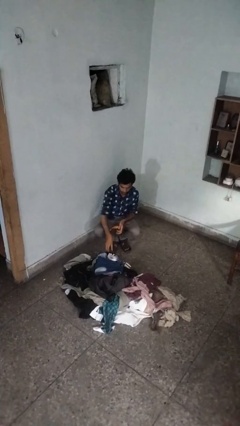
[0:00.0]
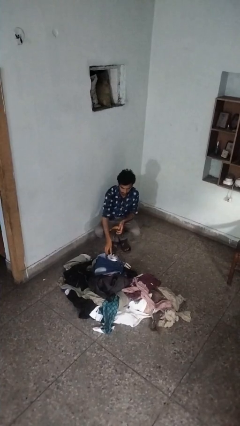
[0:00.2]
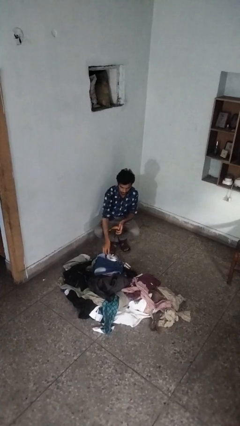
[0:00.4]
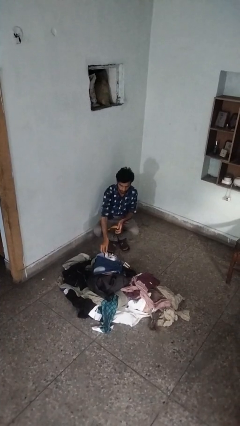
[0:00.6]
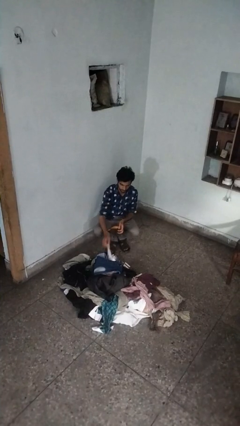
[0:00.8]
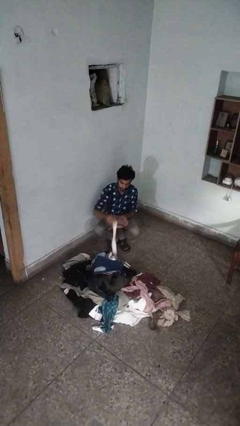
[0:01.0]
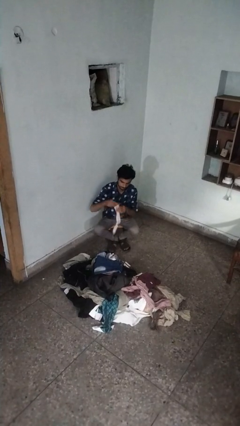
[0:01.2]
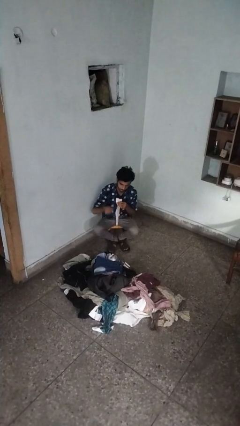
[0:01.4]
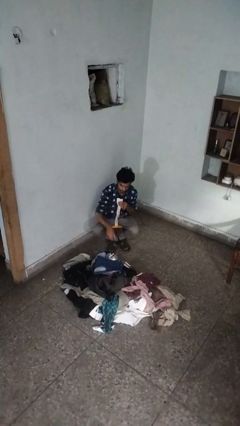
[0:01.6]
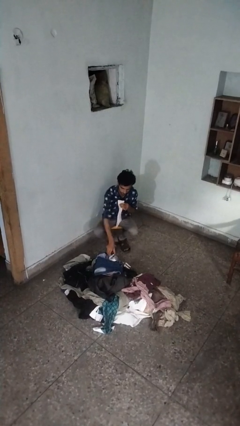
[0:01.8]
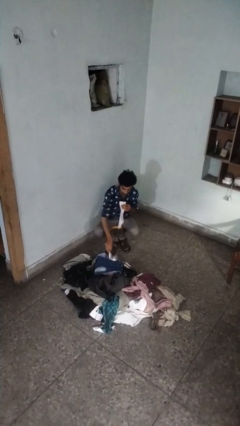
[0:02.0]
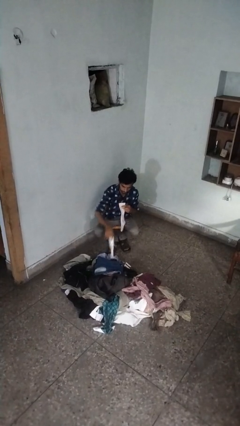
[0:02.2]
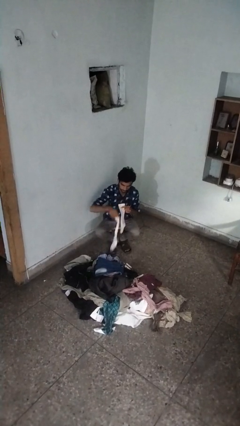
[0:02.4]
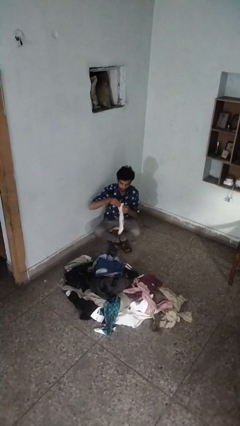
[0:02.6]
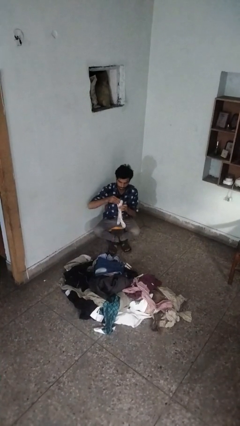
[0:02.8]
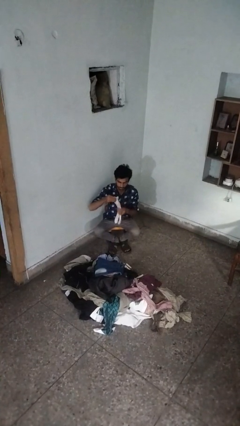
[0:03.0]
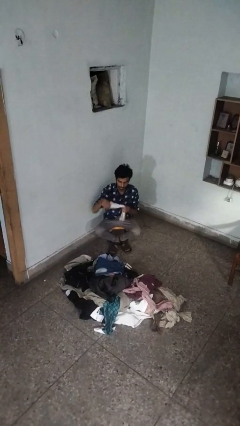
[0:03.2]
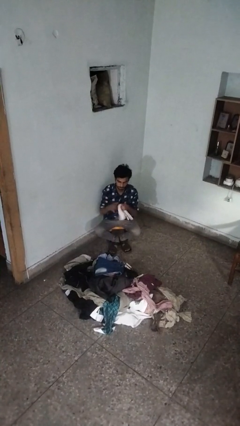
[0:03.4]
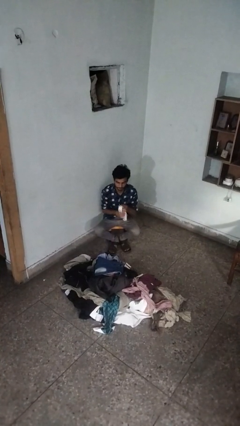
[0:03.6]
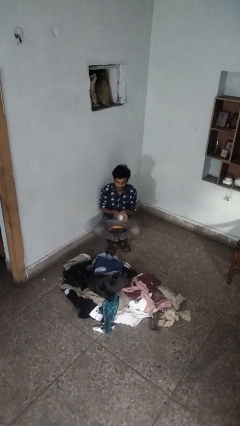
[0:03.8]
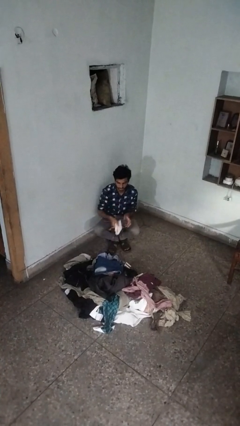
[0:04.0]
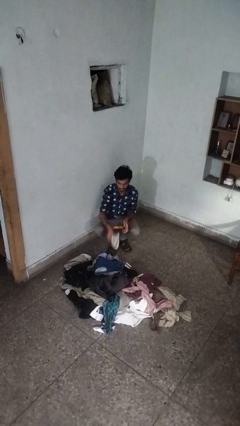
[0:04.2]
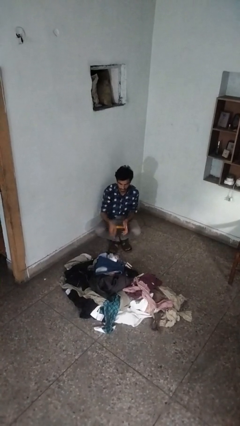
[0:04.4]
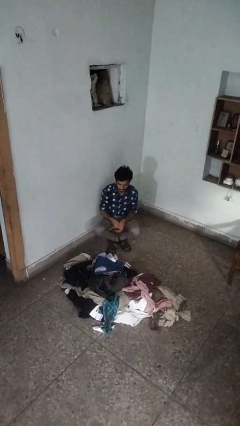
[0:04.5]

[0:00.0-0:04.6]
person folds socks

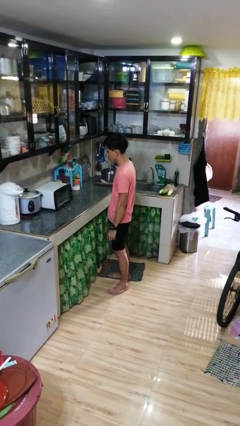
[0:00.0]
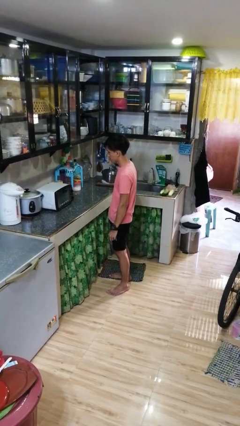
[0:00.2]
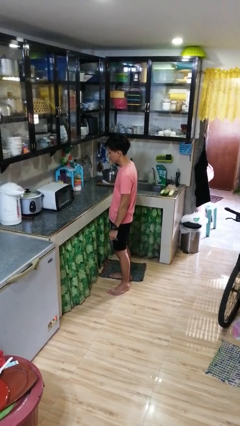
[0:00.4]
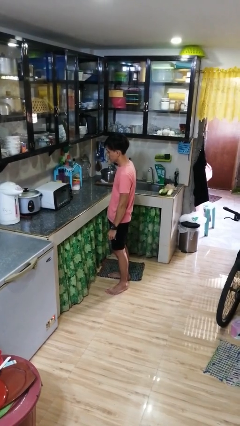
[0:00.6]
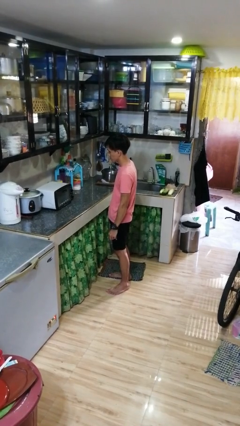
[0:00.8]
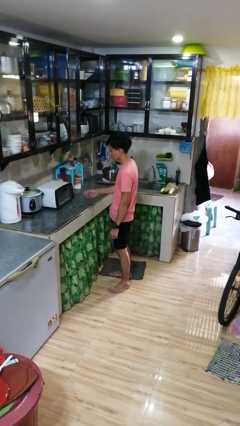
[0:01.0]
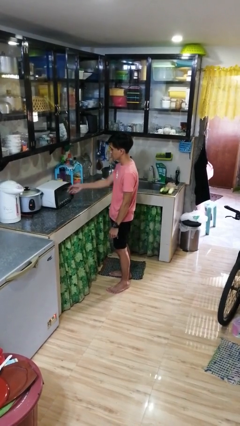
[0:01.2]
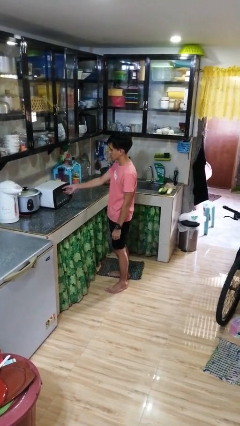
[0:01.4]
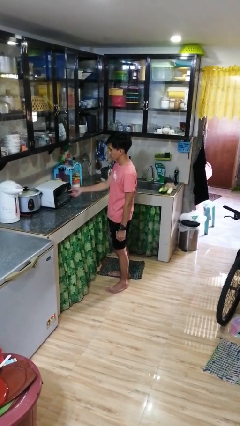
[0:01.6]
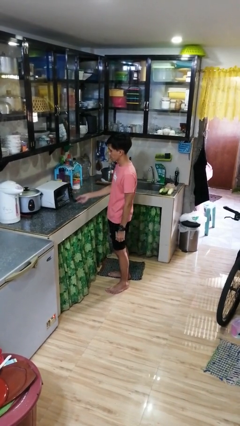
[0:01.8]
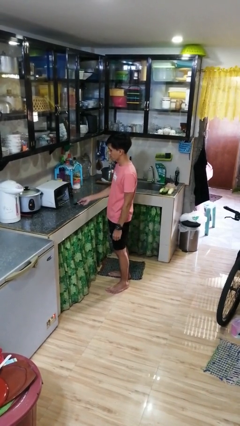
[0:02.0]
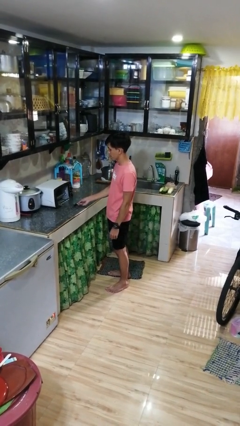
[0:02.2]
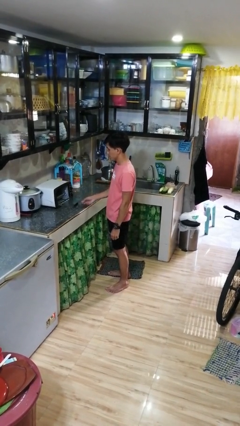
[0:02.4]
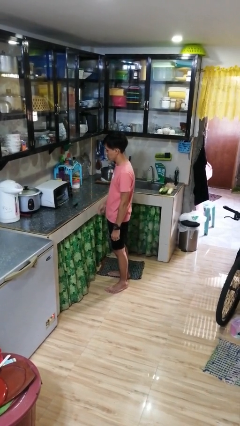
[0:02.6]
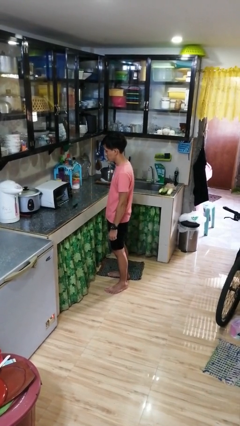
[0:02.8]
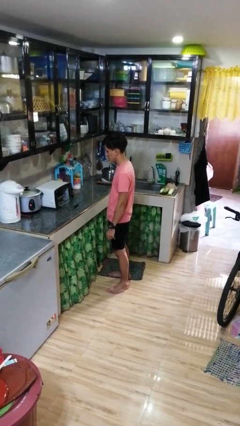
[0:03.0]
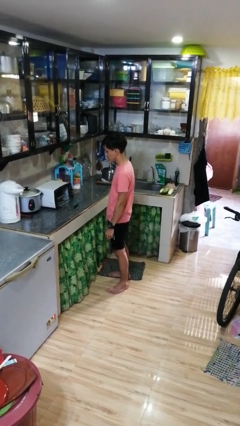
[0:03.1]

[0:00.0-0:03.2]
person opens microwave

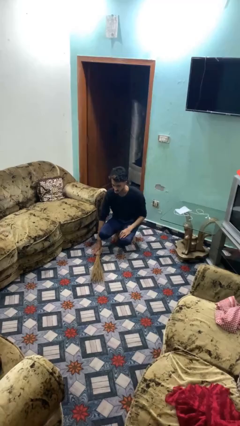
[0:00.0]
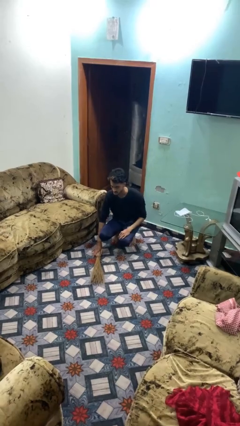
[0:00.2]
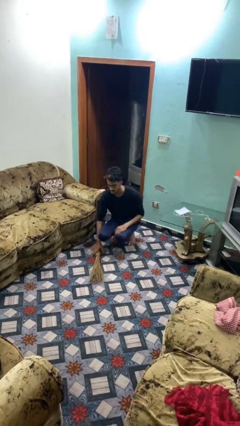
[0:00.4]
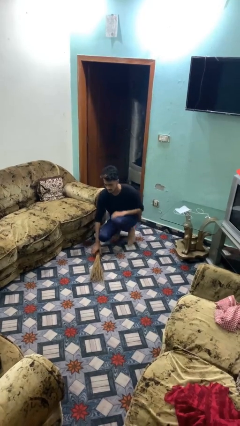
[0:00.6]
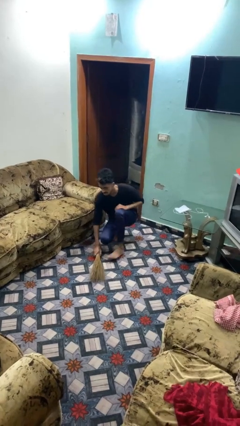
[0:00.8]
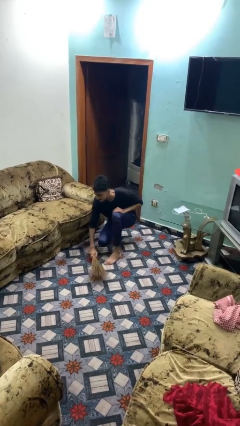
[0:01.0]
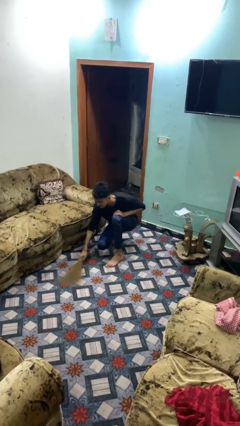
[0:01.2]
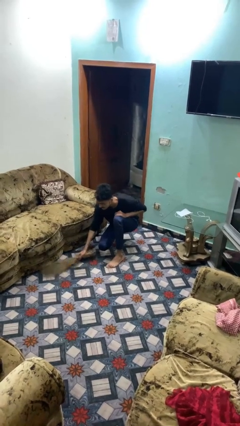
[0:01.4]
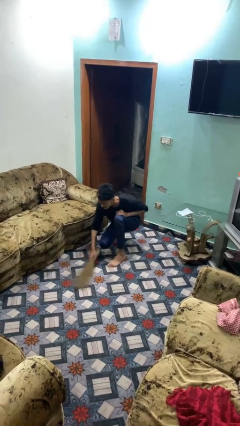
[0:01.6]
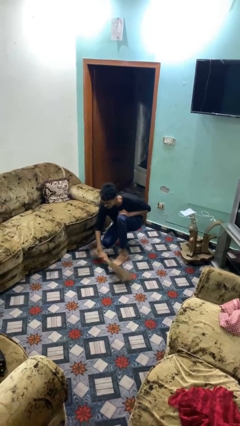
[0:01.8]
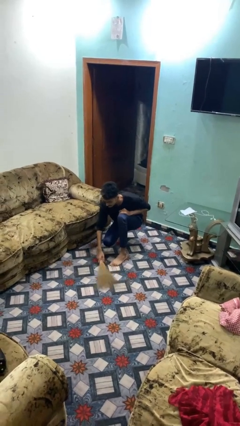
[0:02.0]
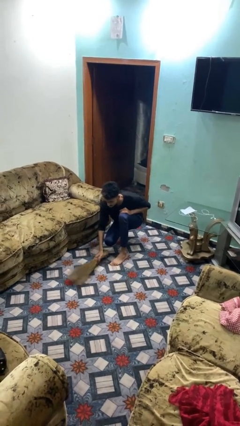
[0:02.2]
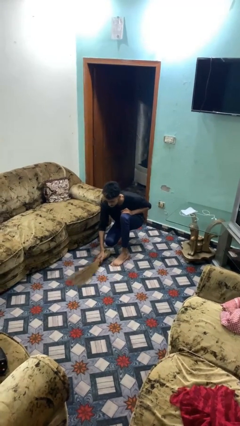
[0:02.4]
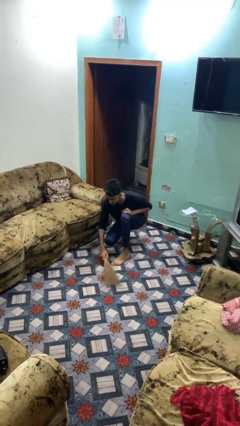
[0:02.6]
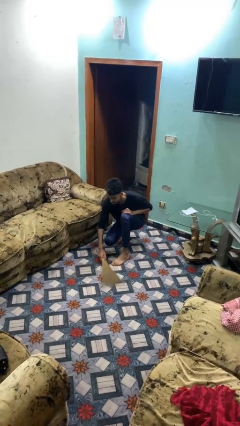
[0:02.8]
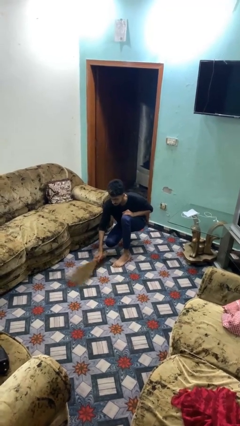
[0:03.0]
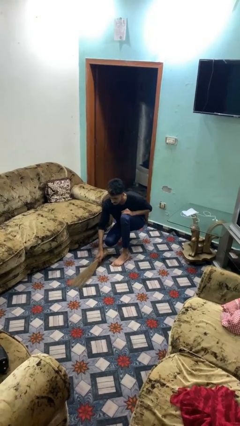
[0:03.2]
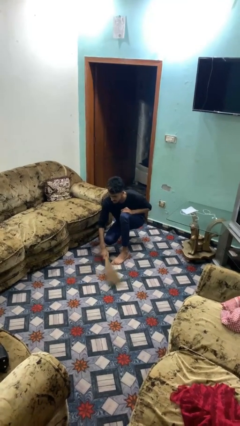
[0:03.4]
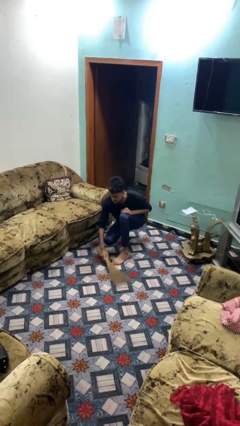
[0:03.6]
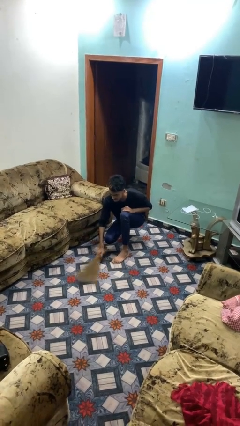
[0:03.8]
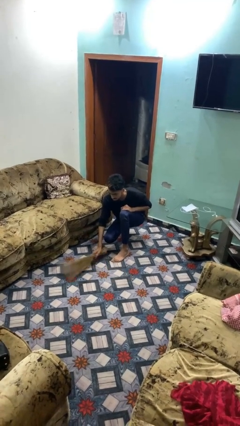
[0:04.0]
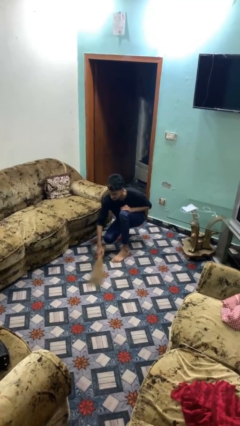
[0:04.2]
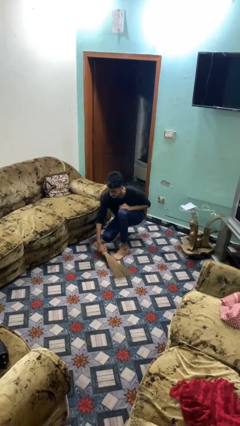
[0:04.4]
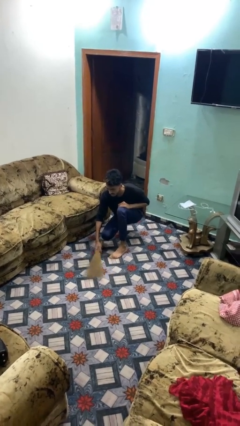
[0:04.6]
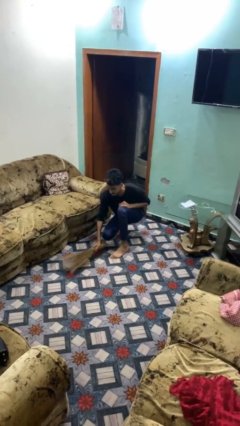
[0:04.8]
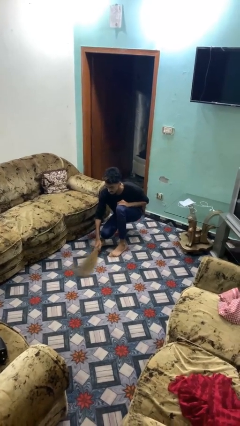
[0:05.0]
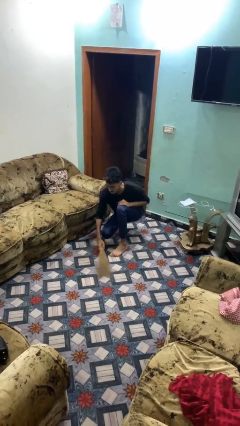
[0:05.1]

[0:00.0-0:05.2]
person sweeps floor

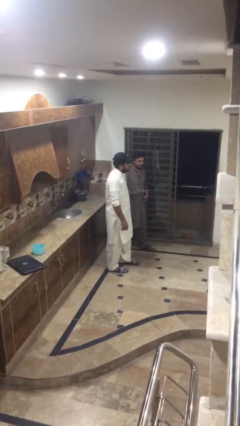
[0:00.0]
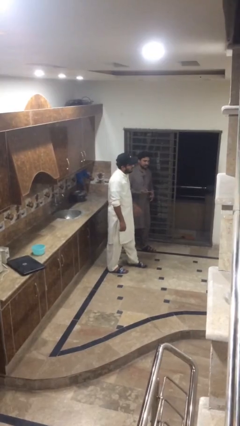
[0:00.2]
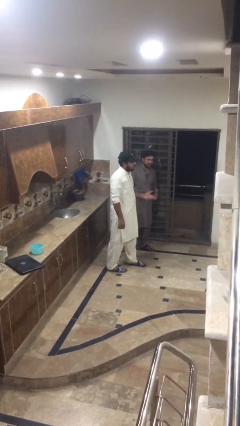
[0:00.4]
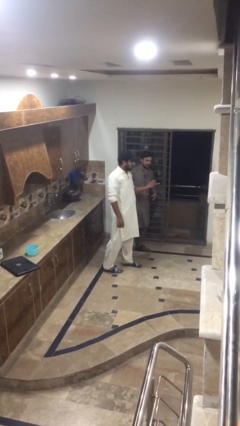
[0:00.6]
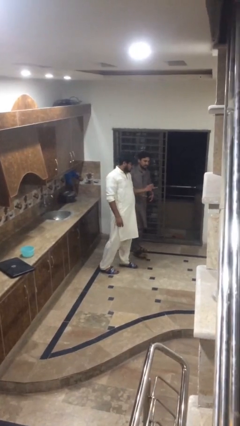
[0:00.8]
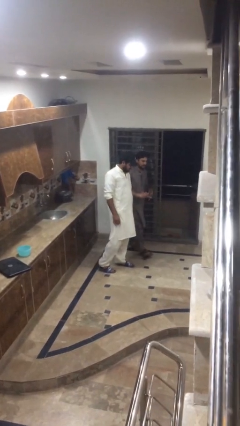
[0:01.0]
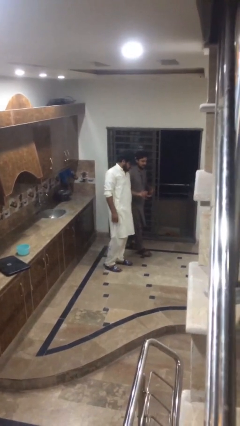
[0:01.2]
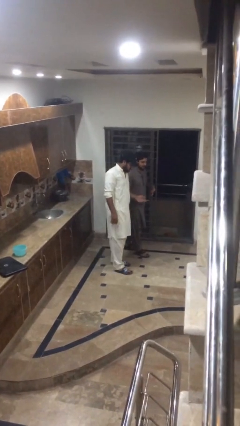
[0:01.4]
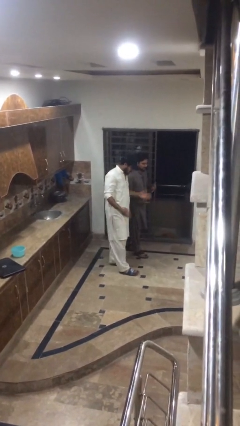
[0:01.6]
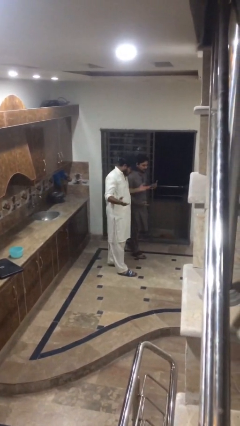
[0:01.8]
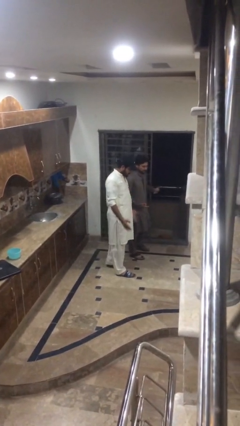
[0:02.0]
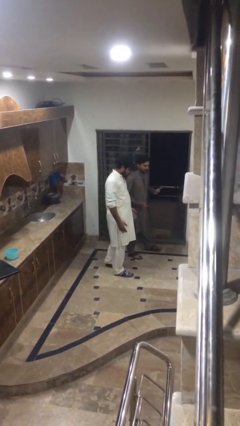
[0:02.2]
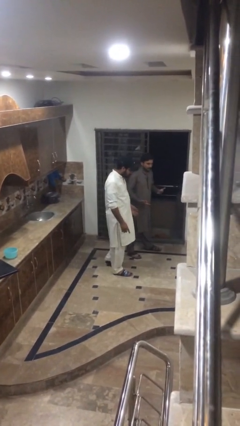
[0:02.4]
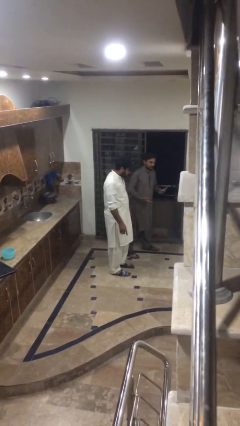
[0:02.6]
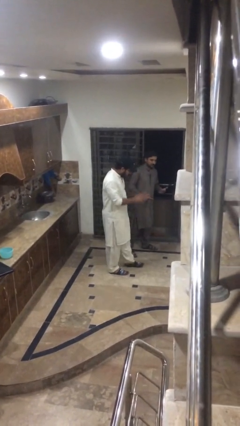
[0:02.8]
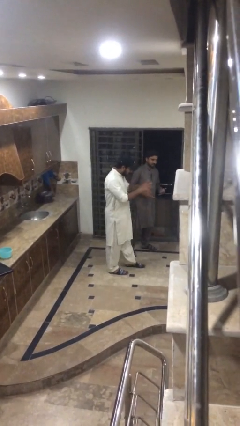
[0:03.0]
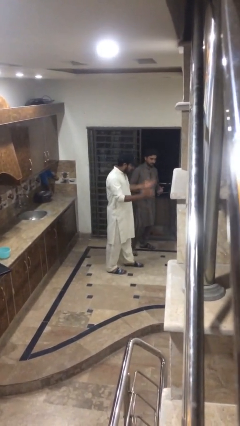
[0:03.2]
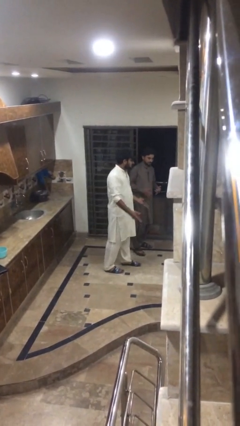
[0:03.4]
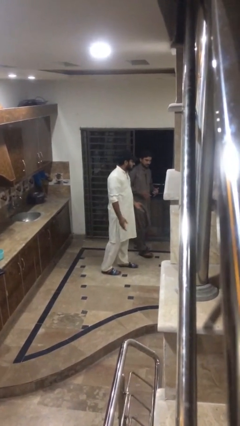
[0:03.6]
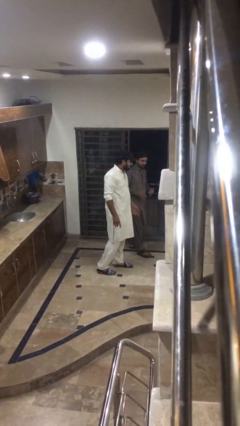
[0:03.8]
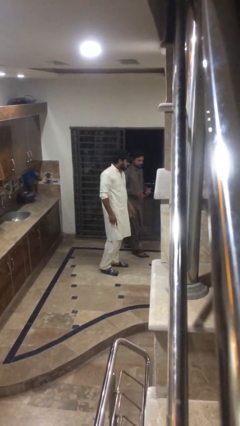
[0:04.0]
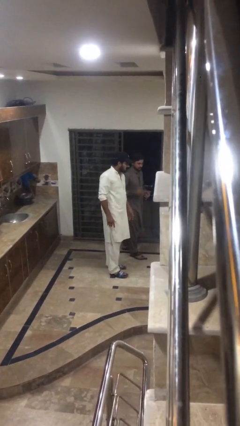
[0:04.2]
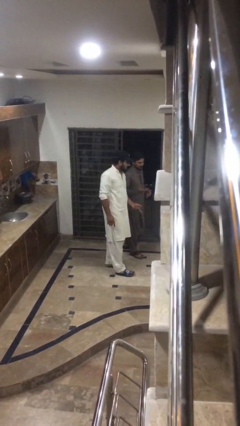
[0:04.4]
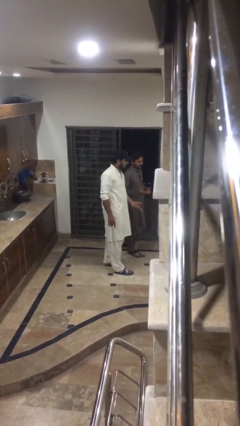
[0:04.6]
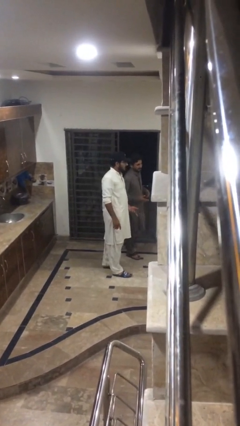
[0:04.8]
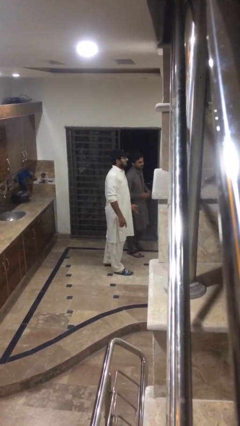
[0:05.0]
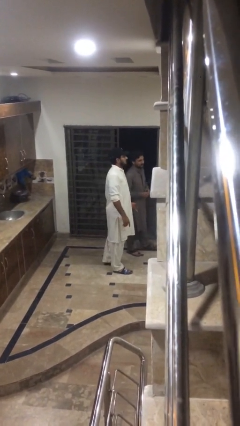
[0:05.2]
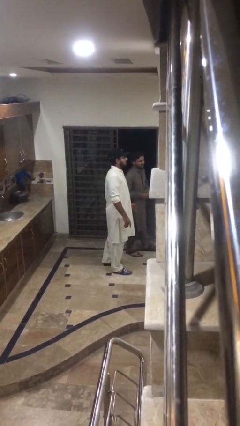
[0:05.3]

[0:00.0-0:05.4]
person talks to person
